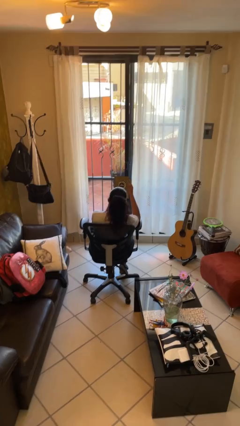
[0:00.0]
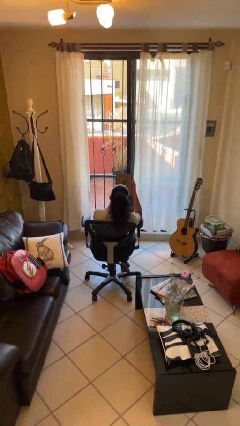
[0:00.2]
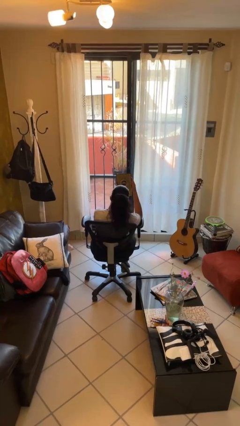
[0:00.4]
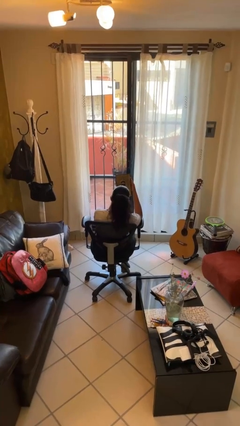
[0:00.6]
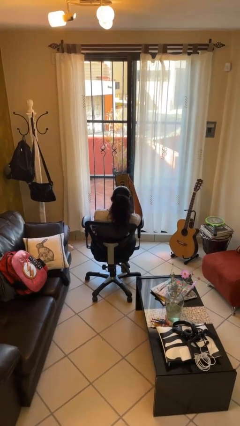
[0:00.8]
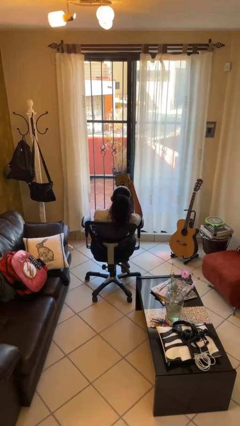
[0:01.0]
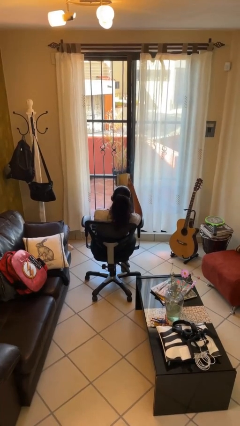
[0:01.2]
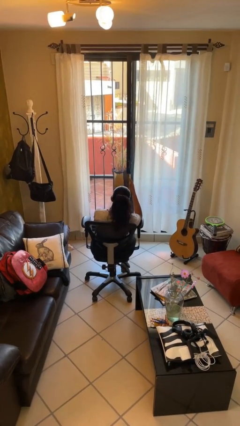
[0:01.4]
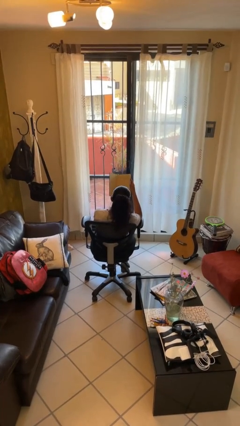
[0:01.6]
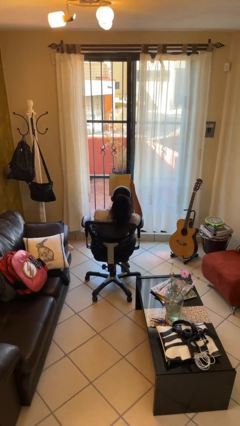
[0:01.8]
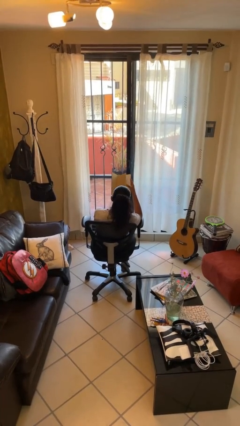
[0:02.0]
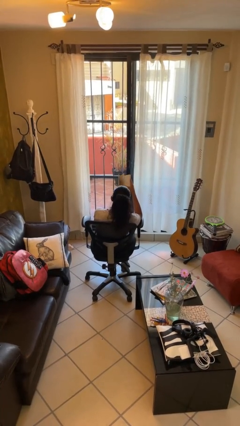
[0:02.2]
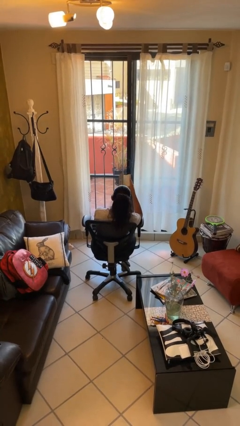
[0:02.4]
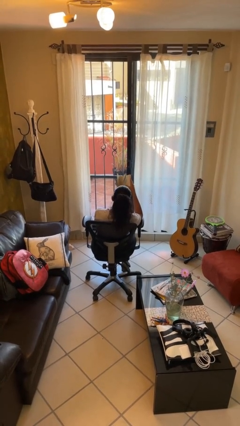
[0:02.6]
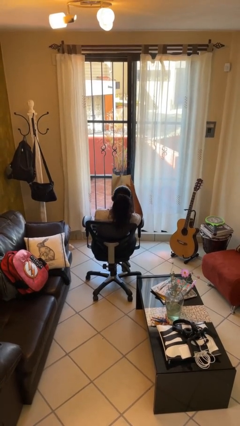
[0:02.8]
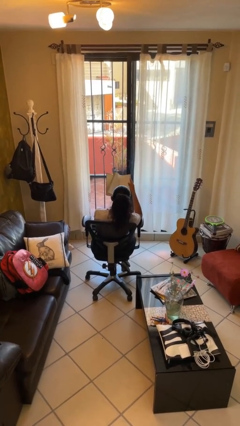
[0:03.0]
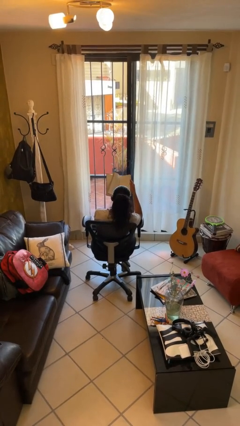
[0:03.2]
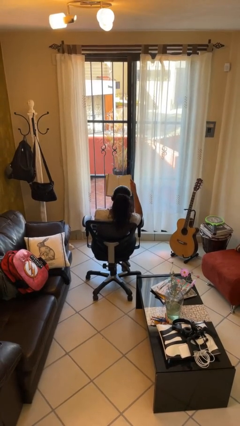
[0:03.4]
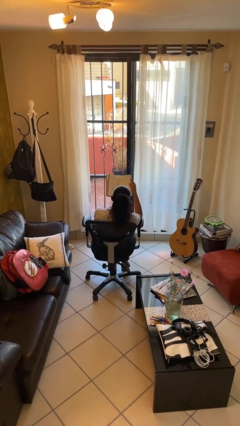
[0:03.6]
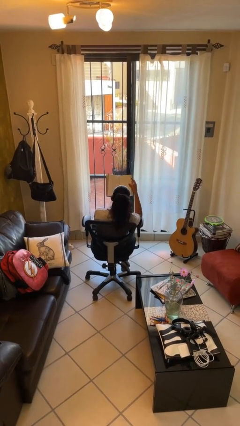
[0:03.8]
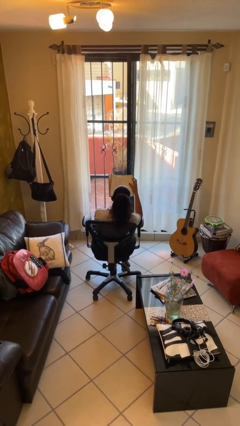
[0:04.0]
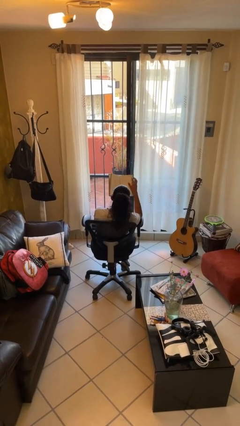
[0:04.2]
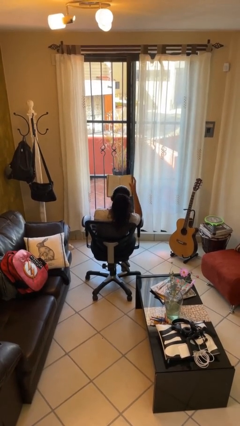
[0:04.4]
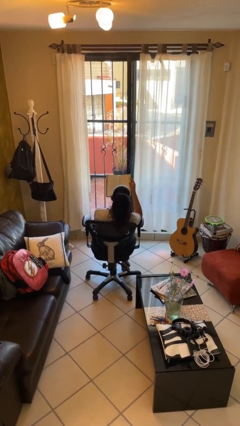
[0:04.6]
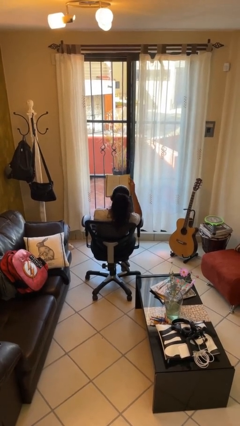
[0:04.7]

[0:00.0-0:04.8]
person reads book

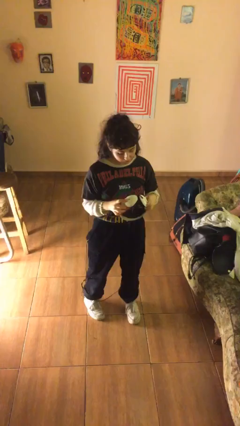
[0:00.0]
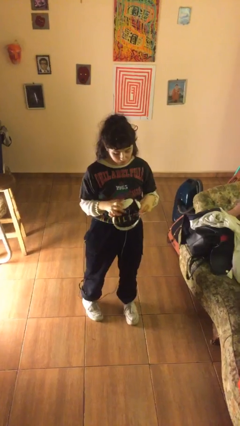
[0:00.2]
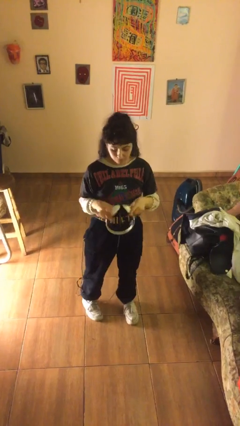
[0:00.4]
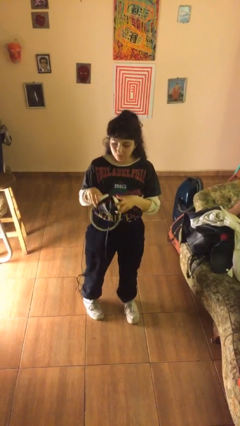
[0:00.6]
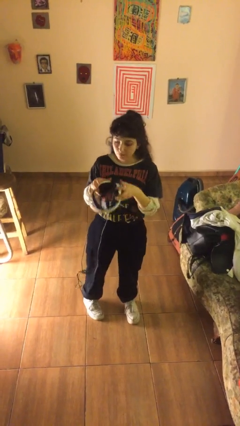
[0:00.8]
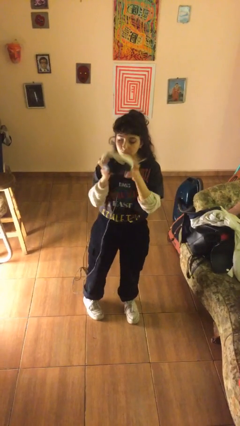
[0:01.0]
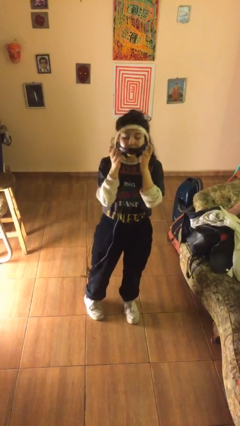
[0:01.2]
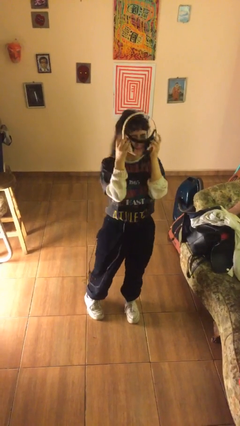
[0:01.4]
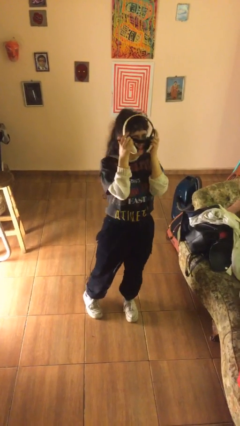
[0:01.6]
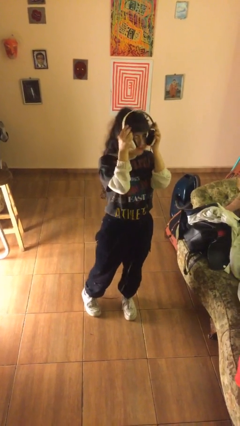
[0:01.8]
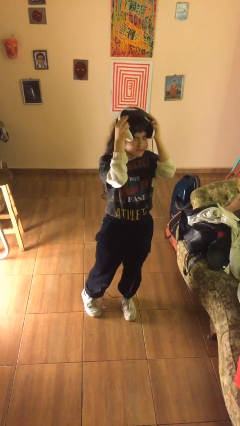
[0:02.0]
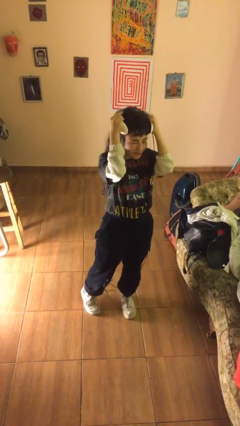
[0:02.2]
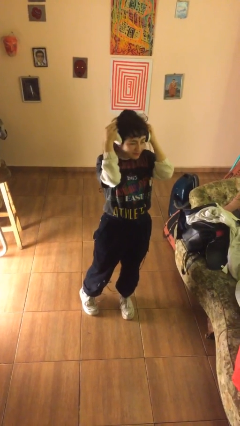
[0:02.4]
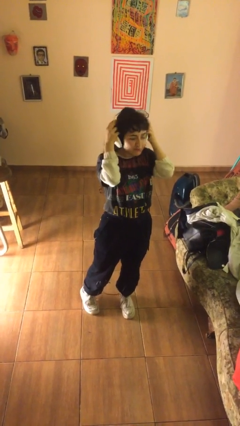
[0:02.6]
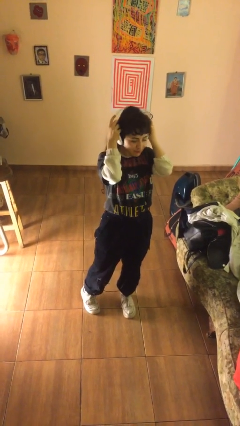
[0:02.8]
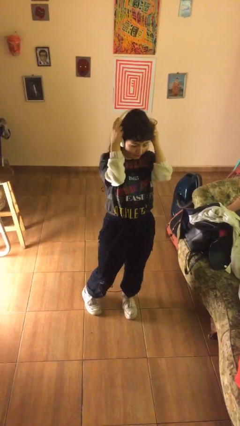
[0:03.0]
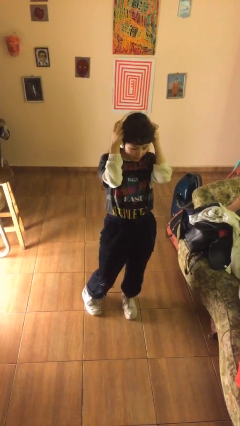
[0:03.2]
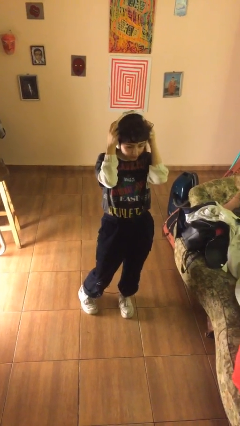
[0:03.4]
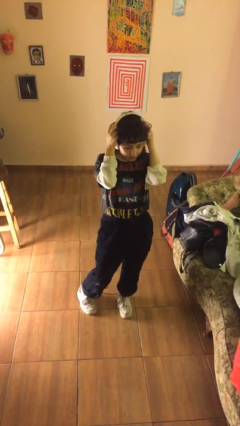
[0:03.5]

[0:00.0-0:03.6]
person puts on headphones

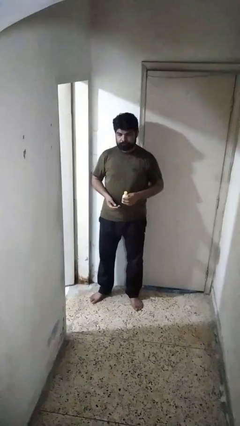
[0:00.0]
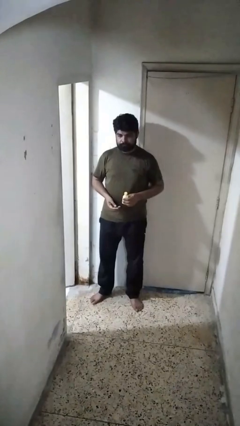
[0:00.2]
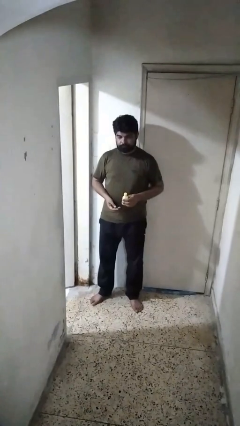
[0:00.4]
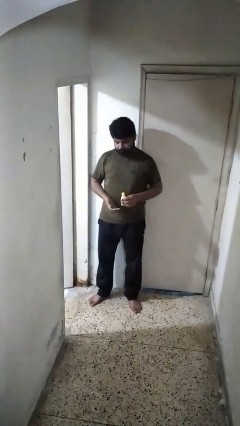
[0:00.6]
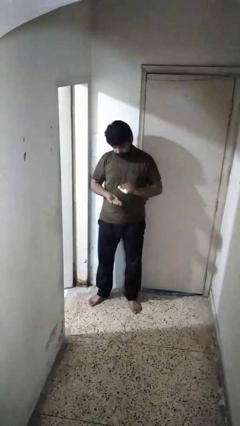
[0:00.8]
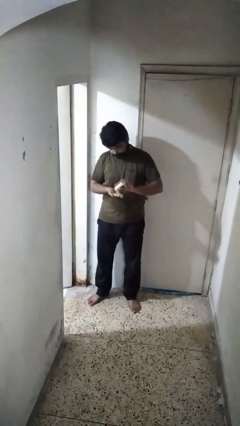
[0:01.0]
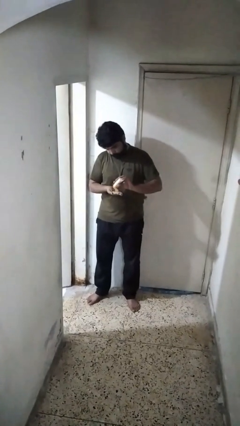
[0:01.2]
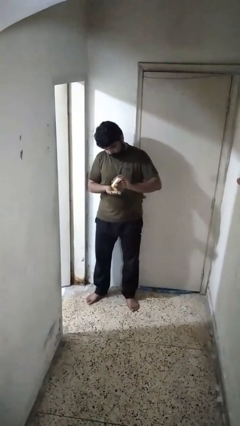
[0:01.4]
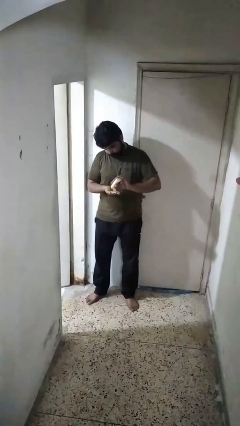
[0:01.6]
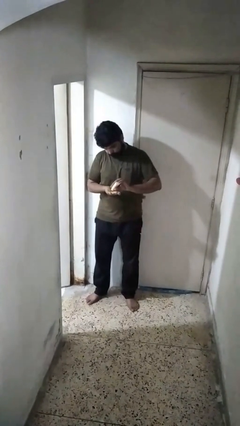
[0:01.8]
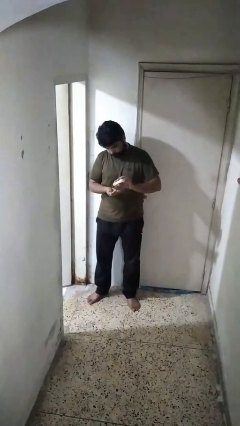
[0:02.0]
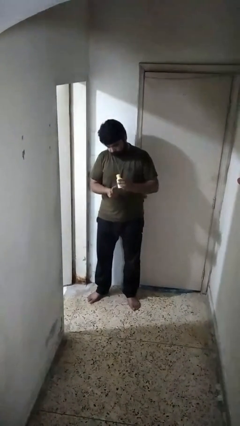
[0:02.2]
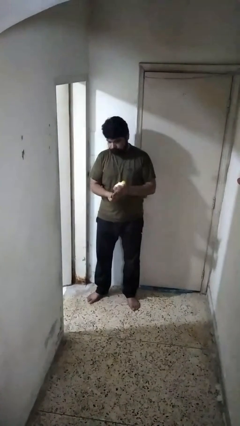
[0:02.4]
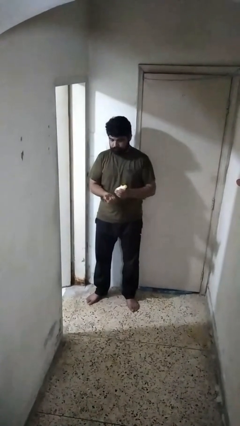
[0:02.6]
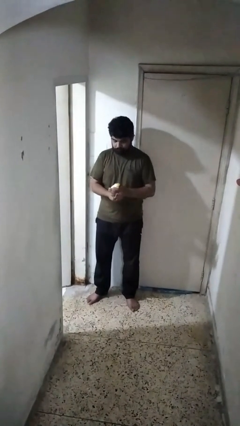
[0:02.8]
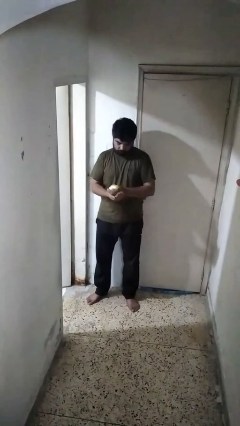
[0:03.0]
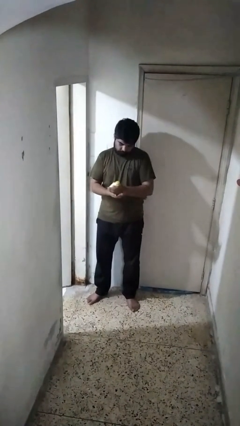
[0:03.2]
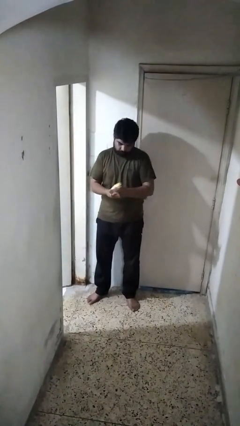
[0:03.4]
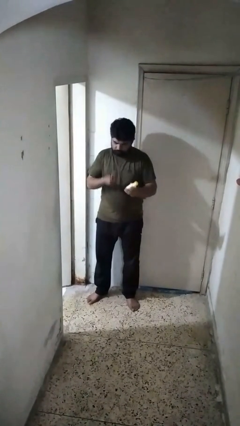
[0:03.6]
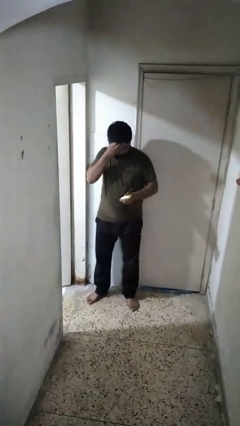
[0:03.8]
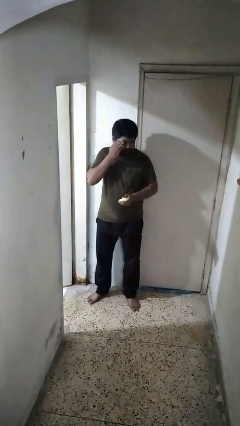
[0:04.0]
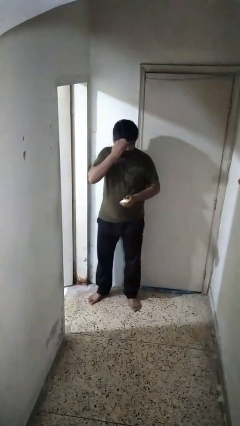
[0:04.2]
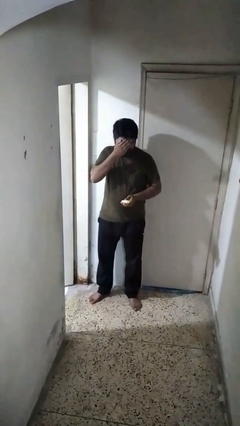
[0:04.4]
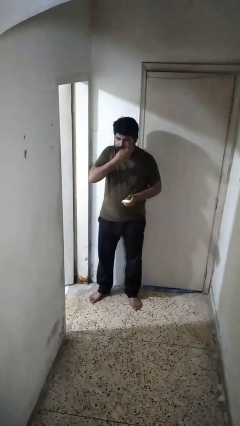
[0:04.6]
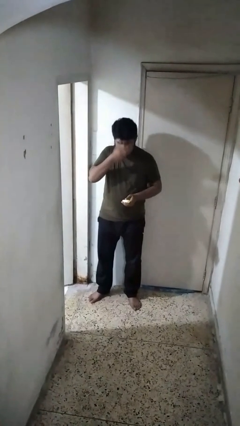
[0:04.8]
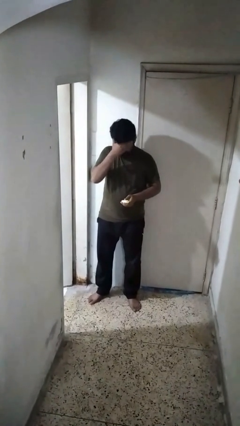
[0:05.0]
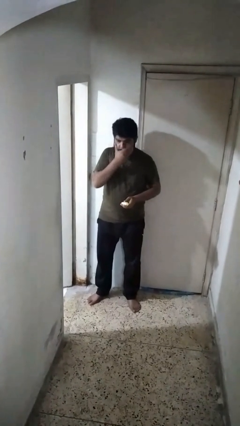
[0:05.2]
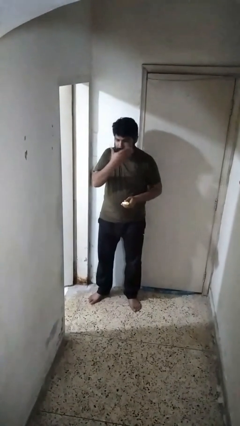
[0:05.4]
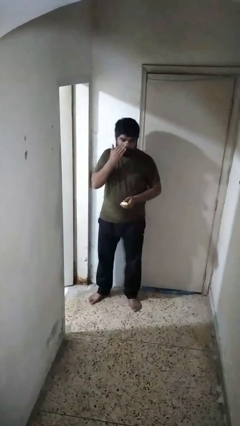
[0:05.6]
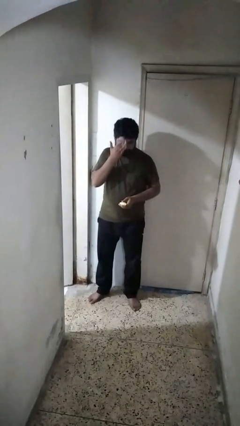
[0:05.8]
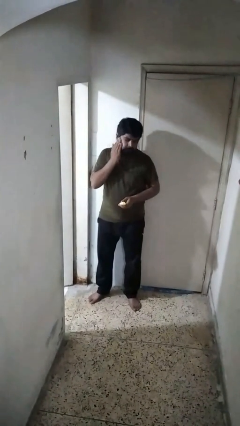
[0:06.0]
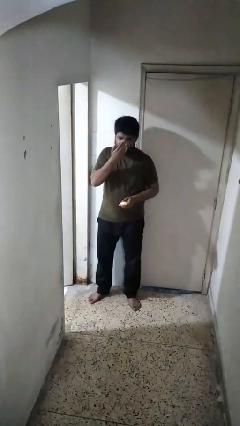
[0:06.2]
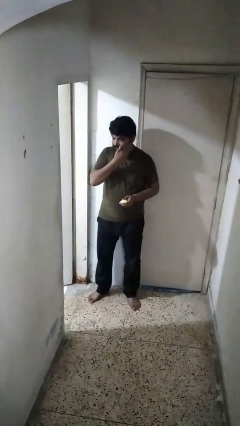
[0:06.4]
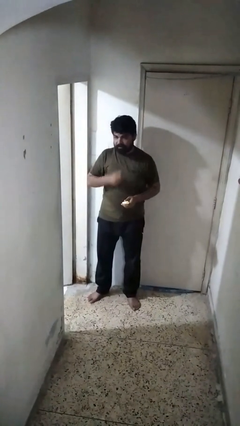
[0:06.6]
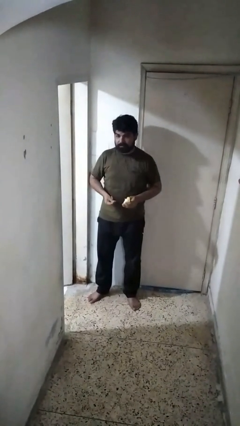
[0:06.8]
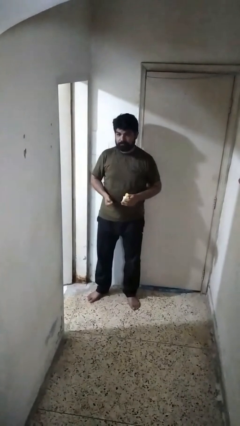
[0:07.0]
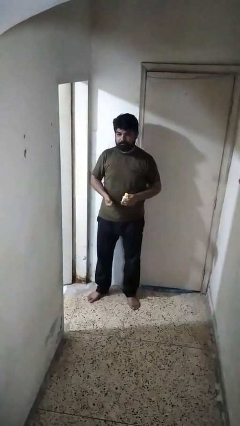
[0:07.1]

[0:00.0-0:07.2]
person applies sunscreen

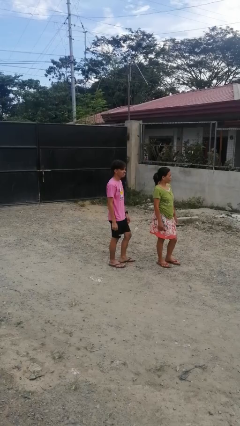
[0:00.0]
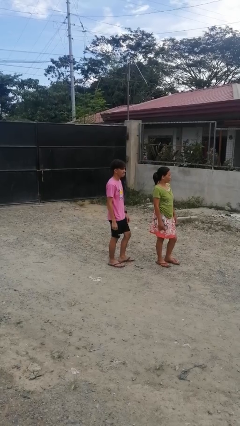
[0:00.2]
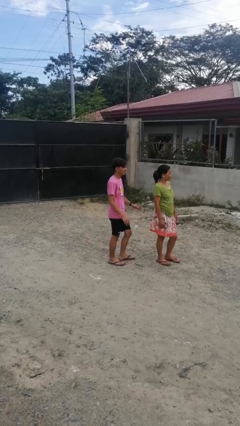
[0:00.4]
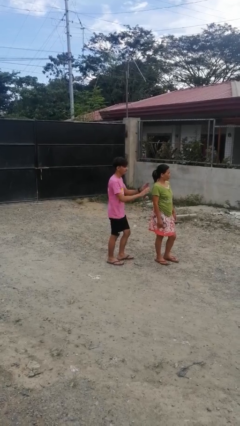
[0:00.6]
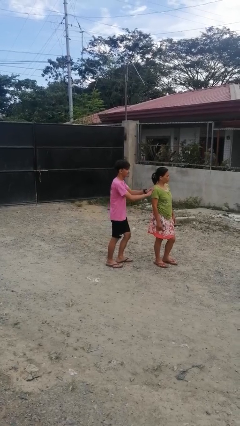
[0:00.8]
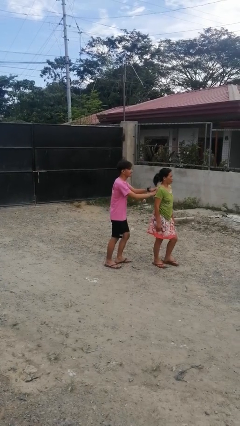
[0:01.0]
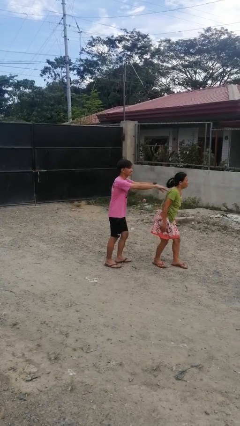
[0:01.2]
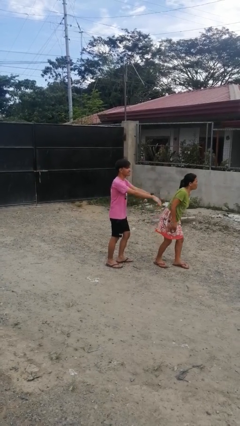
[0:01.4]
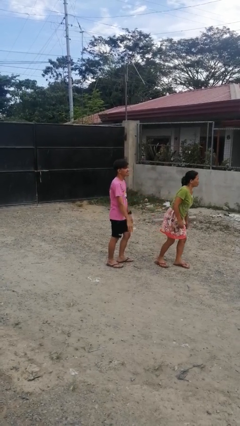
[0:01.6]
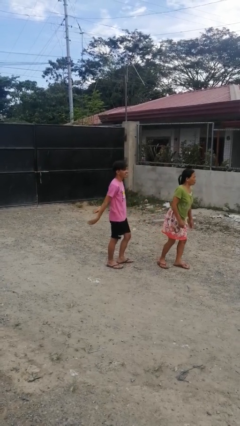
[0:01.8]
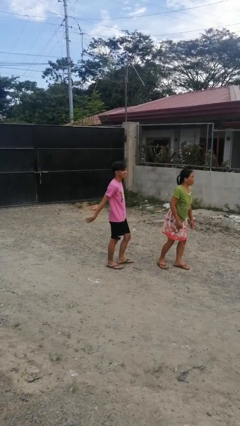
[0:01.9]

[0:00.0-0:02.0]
person shoves person

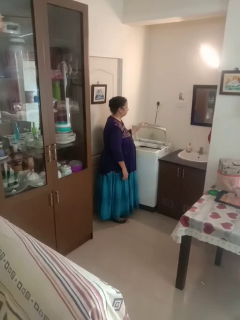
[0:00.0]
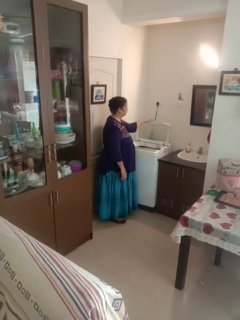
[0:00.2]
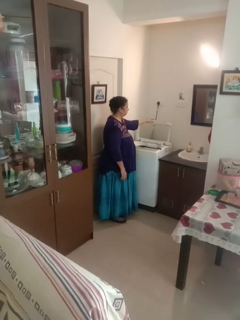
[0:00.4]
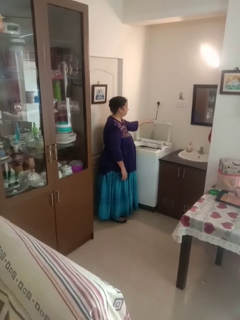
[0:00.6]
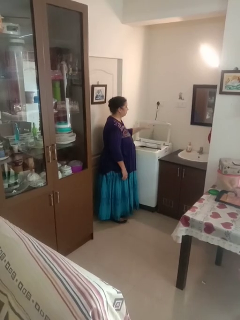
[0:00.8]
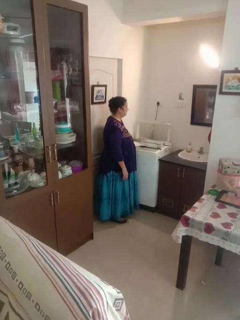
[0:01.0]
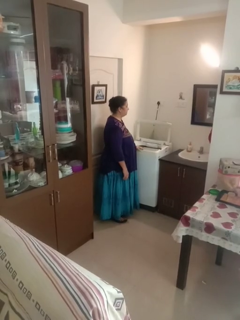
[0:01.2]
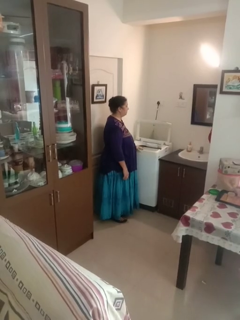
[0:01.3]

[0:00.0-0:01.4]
person opens clothes washer
